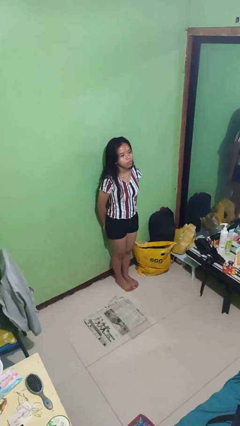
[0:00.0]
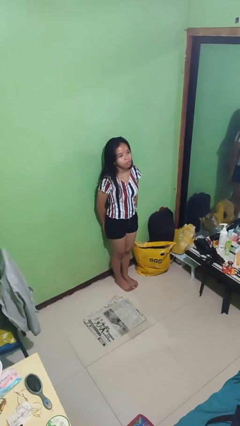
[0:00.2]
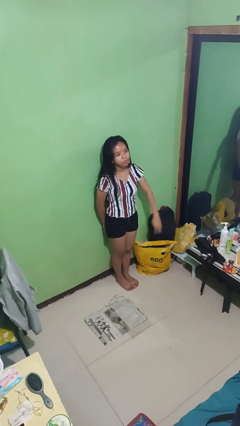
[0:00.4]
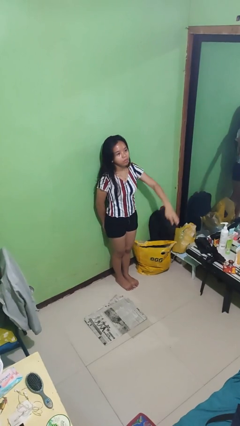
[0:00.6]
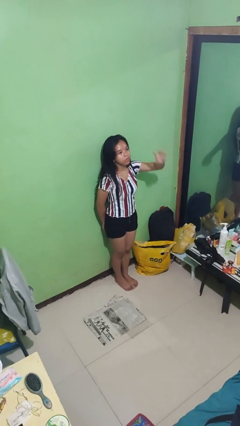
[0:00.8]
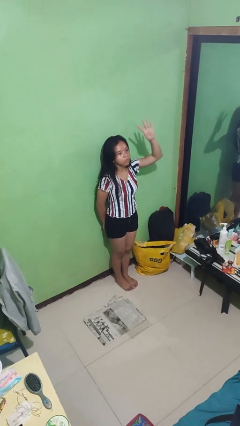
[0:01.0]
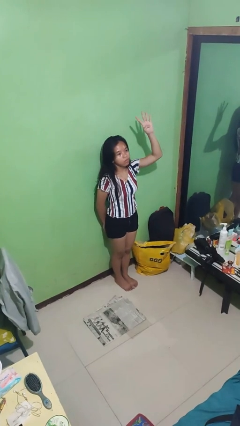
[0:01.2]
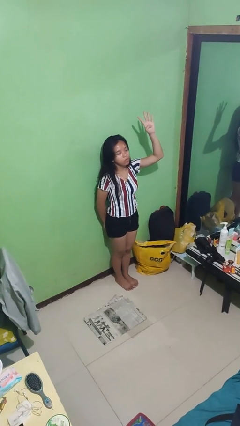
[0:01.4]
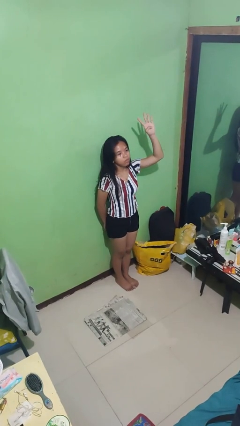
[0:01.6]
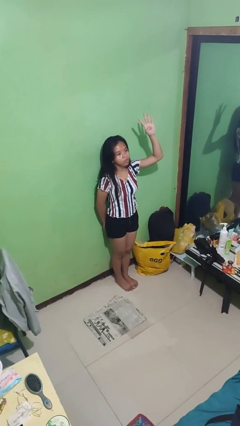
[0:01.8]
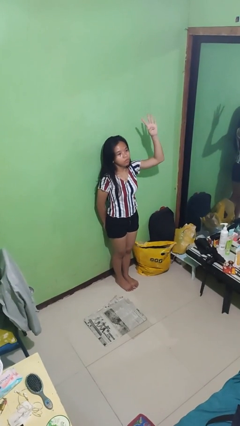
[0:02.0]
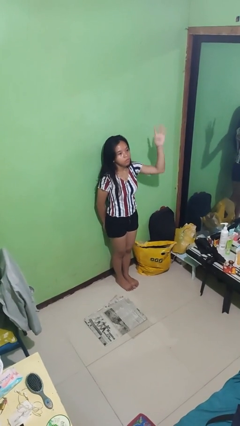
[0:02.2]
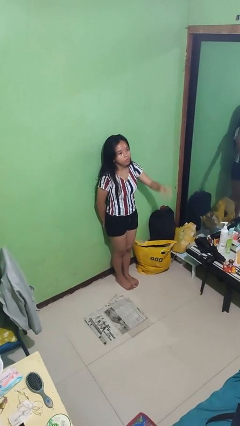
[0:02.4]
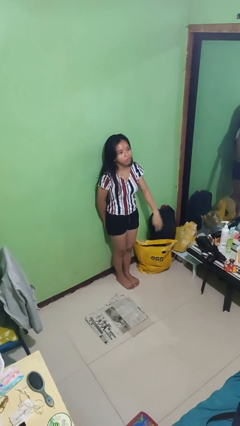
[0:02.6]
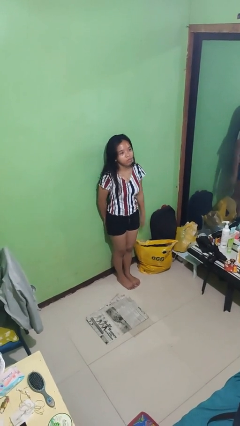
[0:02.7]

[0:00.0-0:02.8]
person gestures number four

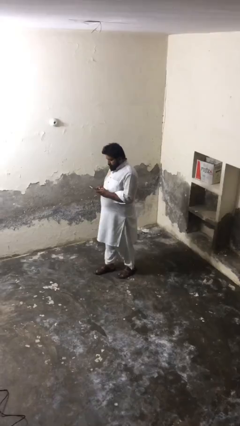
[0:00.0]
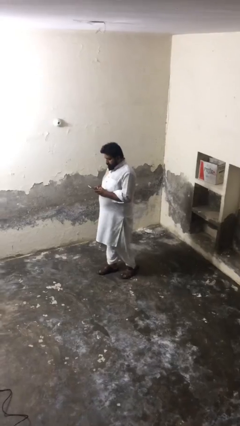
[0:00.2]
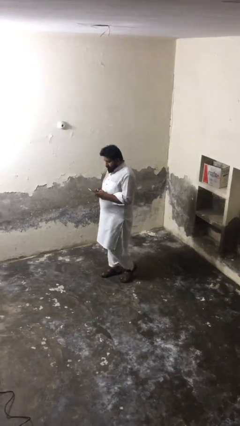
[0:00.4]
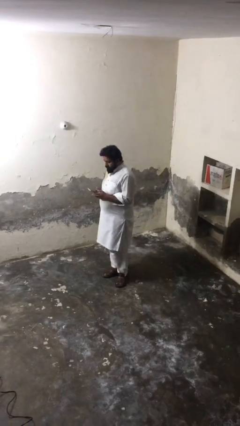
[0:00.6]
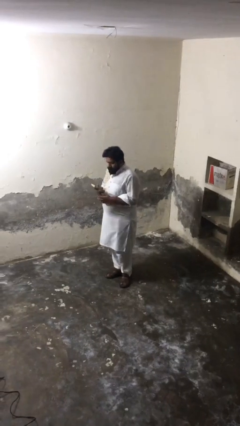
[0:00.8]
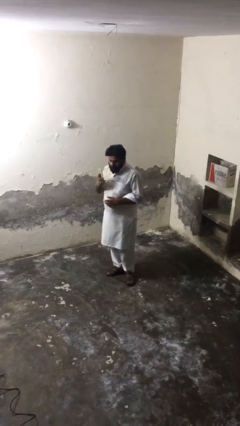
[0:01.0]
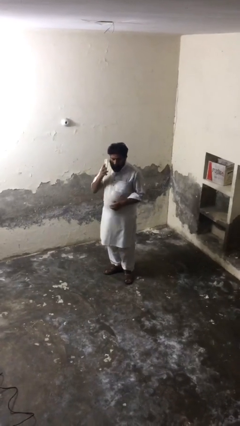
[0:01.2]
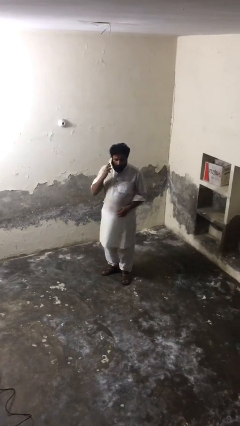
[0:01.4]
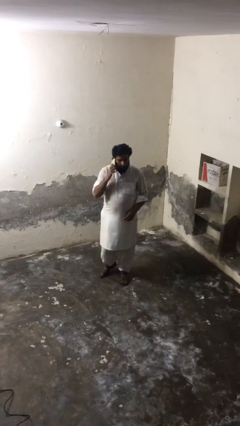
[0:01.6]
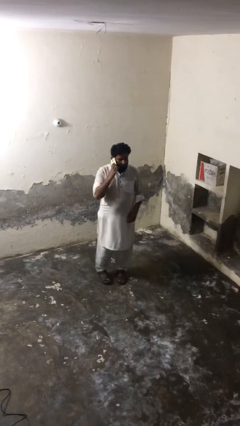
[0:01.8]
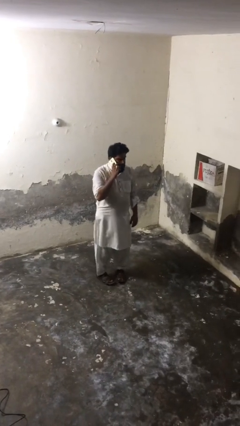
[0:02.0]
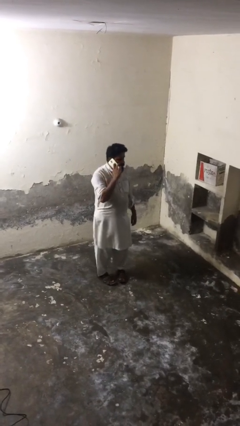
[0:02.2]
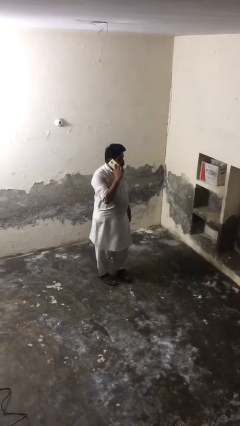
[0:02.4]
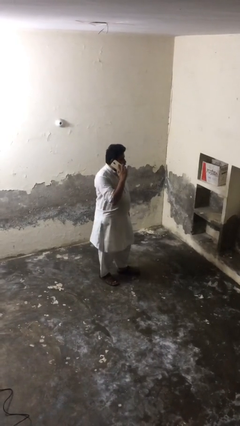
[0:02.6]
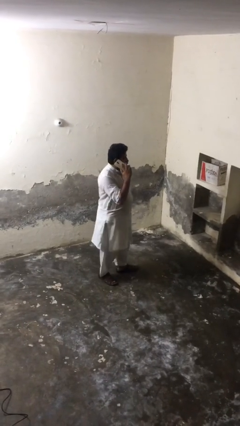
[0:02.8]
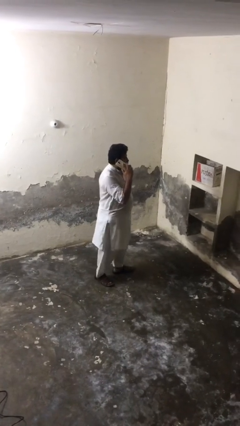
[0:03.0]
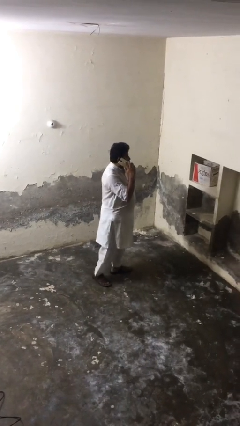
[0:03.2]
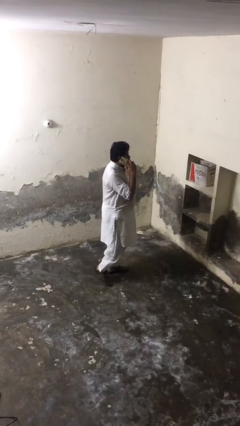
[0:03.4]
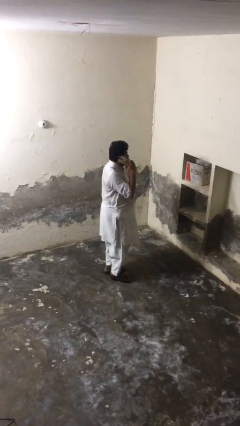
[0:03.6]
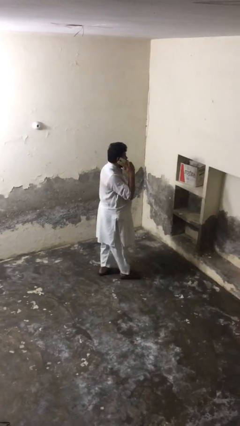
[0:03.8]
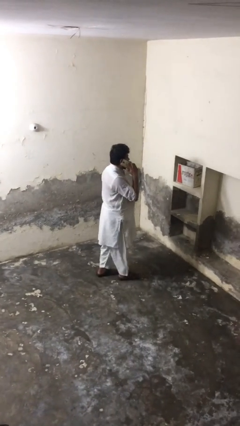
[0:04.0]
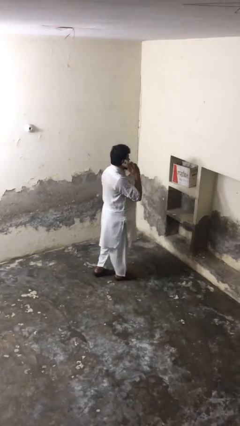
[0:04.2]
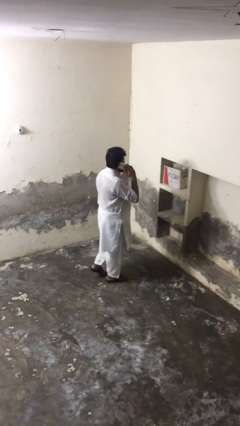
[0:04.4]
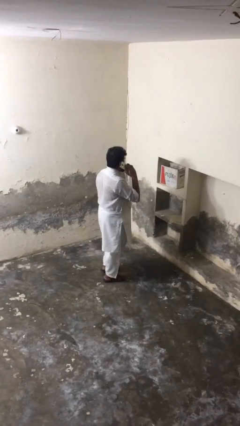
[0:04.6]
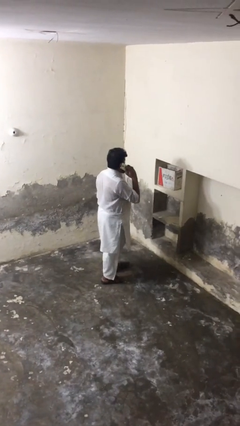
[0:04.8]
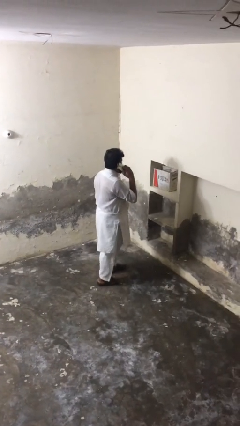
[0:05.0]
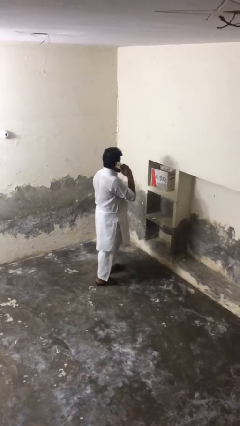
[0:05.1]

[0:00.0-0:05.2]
person talks on phone

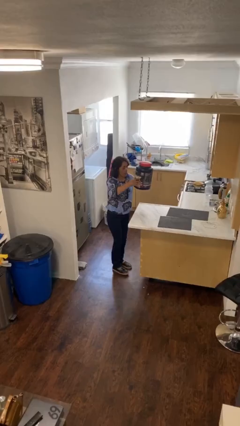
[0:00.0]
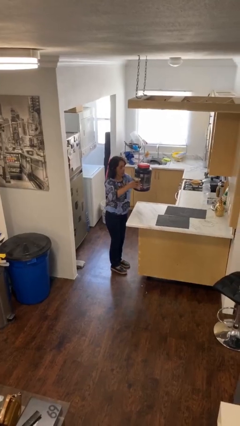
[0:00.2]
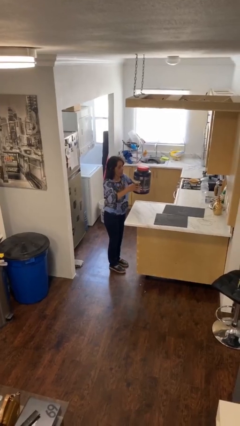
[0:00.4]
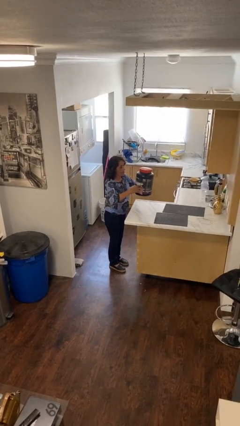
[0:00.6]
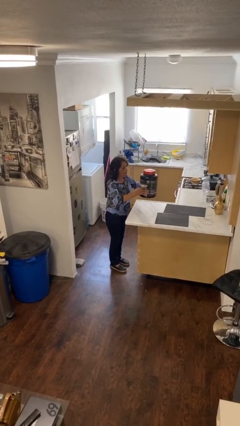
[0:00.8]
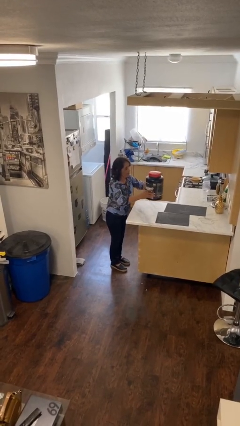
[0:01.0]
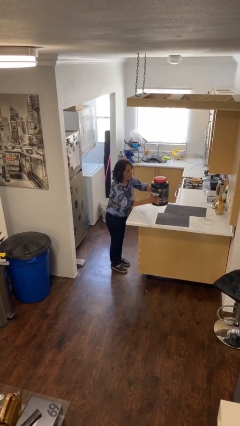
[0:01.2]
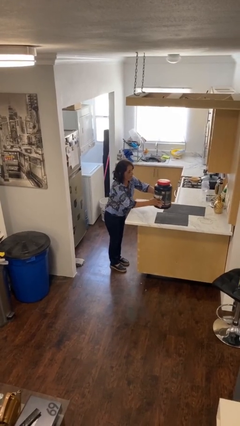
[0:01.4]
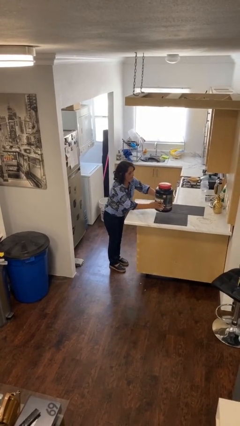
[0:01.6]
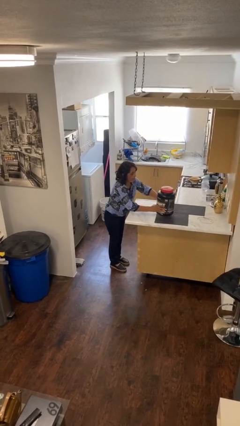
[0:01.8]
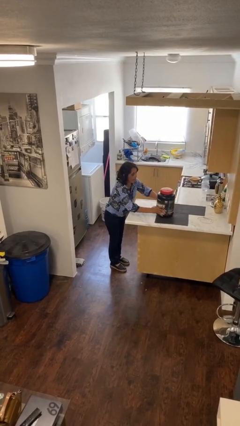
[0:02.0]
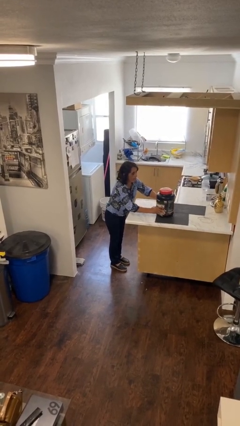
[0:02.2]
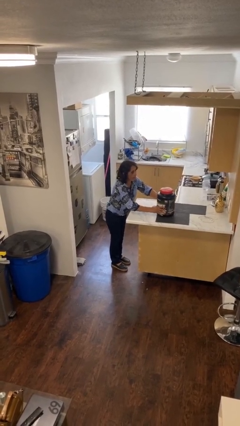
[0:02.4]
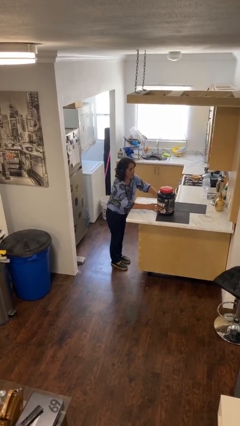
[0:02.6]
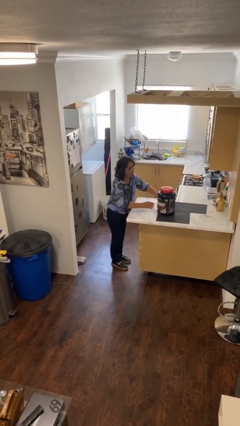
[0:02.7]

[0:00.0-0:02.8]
person puts down object on table

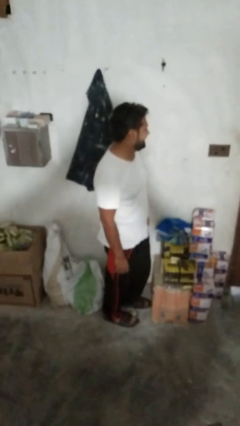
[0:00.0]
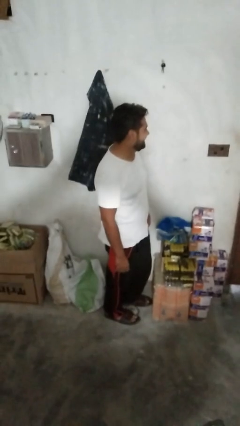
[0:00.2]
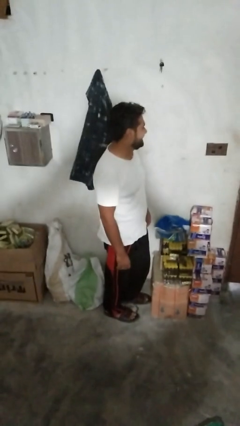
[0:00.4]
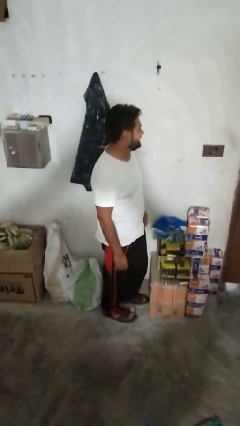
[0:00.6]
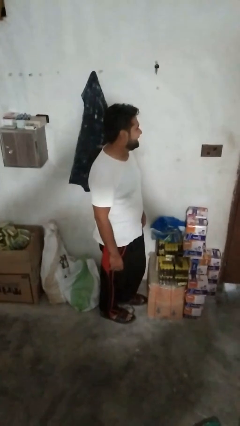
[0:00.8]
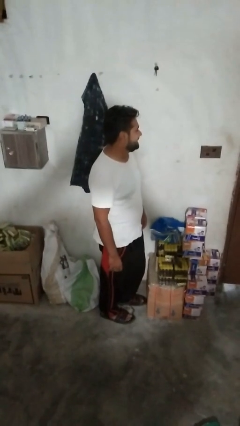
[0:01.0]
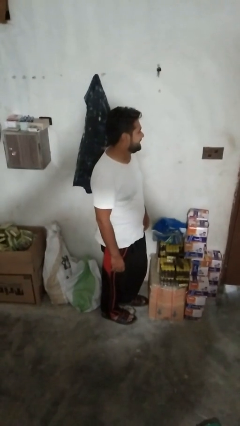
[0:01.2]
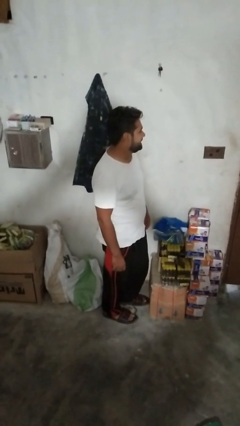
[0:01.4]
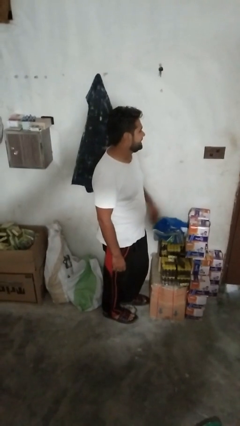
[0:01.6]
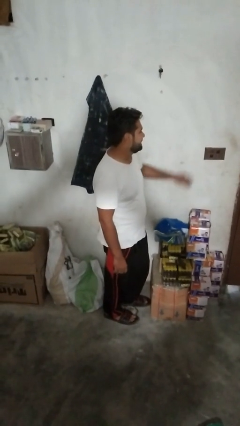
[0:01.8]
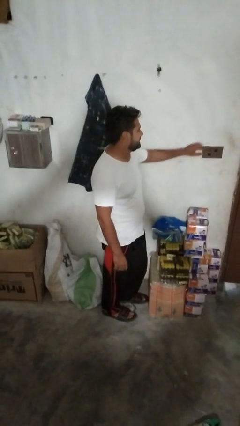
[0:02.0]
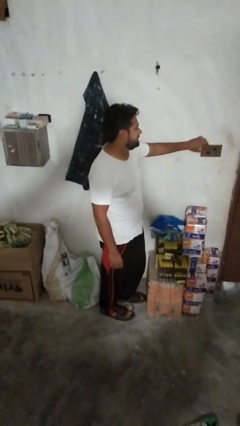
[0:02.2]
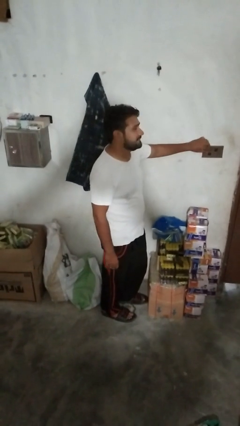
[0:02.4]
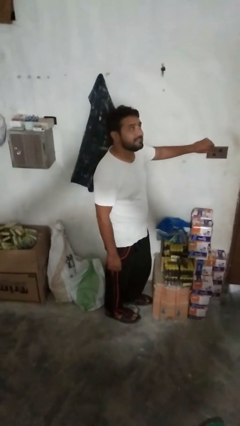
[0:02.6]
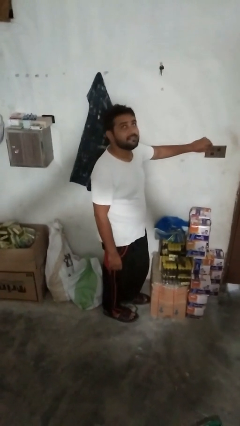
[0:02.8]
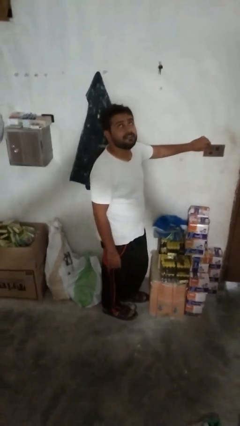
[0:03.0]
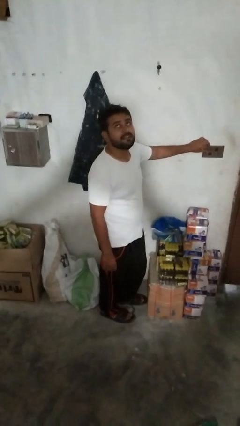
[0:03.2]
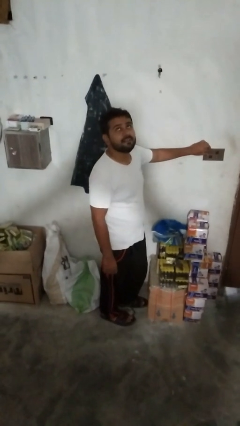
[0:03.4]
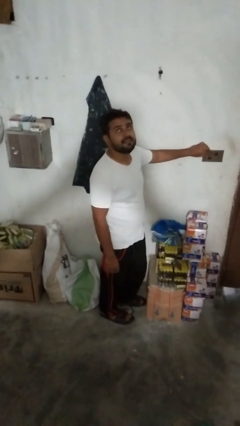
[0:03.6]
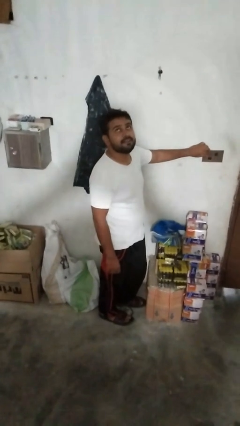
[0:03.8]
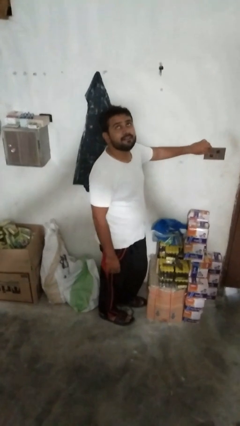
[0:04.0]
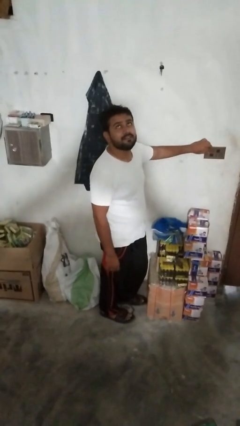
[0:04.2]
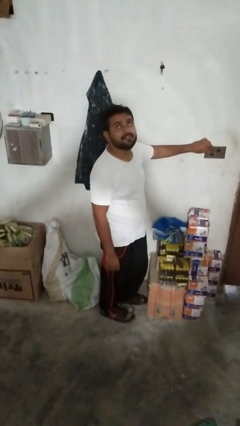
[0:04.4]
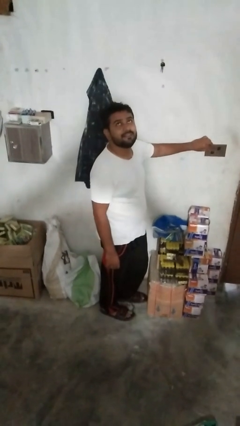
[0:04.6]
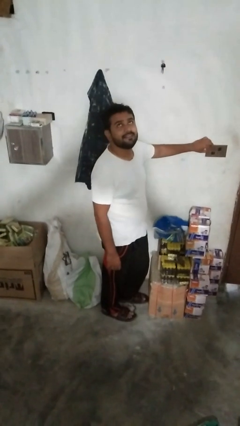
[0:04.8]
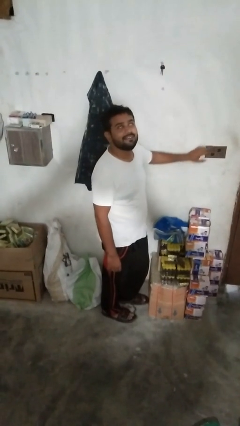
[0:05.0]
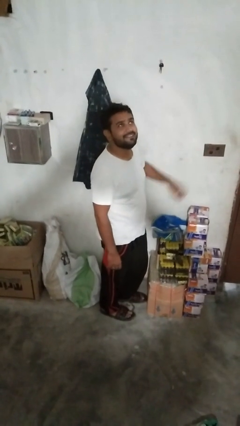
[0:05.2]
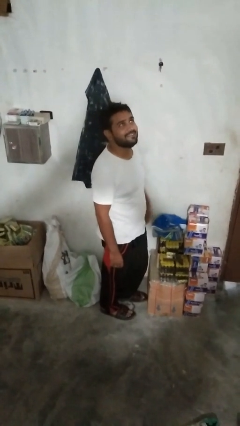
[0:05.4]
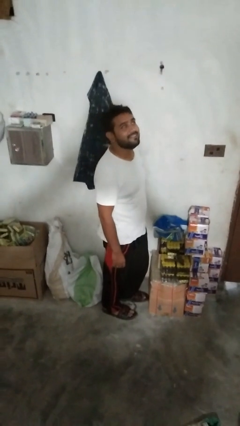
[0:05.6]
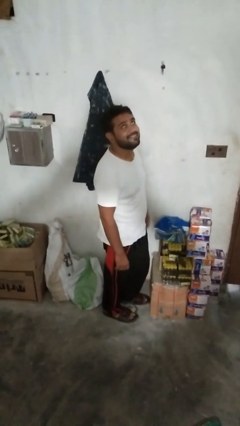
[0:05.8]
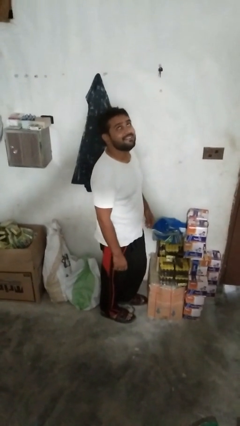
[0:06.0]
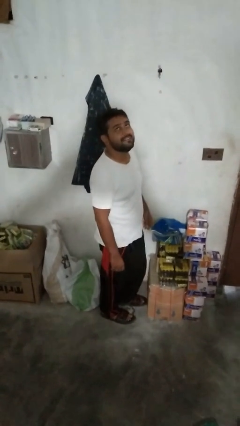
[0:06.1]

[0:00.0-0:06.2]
person adjusts thermostat

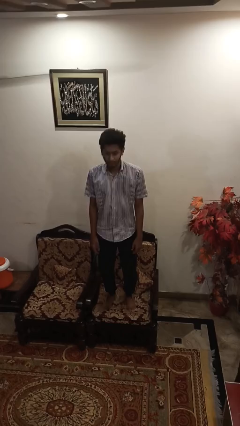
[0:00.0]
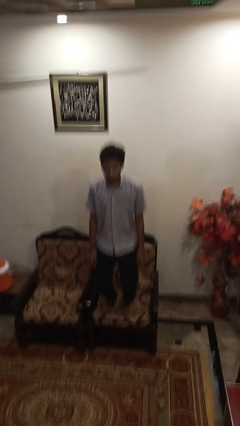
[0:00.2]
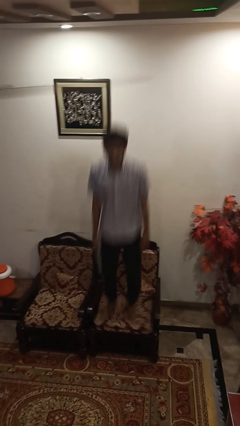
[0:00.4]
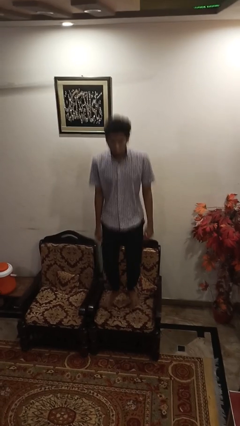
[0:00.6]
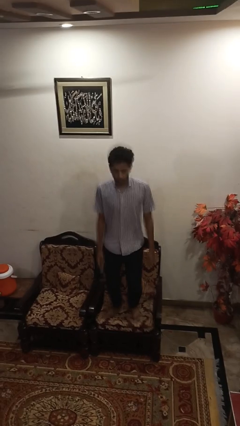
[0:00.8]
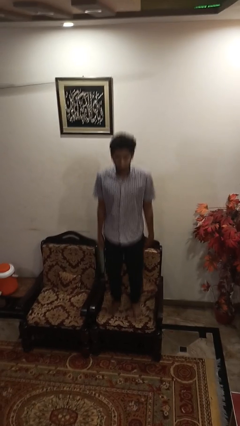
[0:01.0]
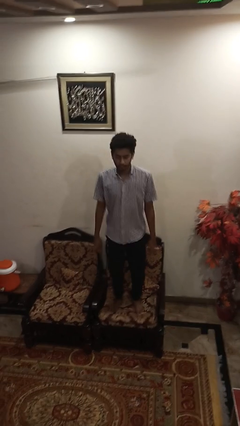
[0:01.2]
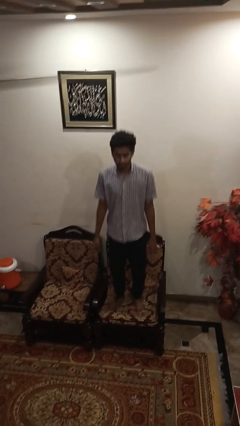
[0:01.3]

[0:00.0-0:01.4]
person jumps on couch
